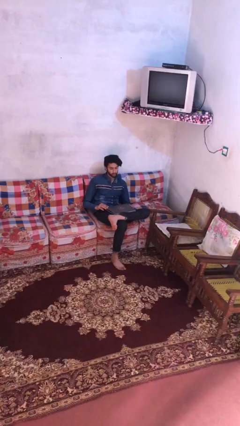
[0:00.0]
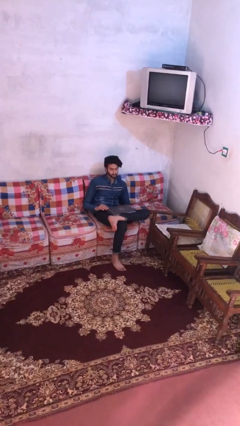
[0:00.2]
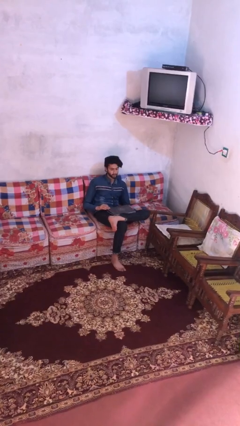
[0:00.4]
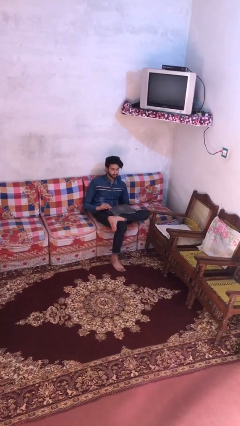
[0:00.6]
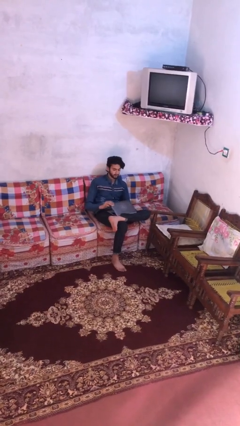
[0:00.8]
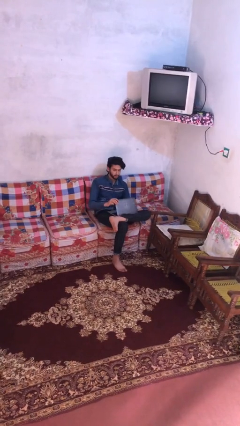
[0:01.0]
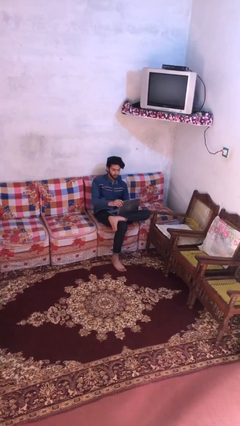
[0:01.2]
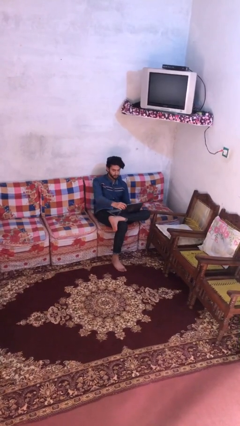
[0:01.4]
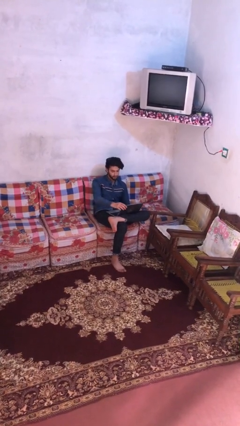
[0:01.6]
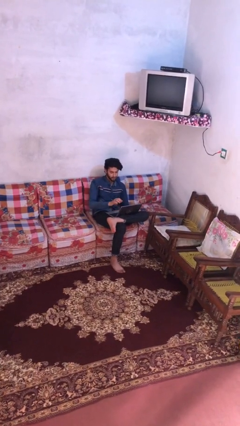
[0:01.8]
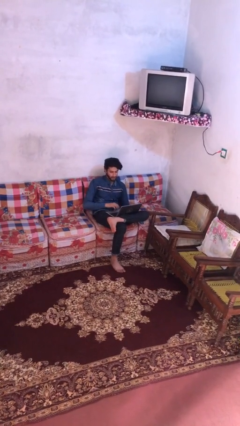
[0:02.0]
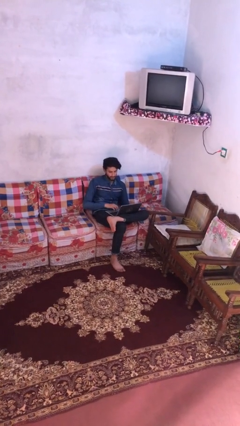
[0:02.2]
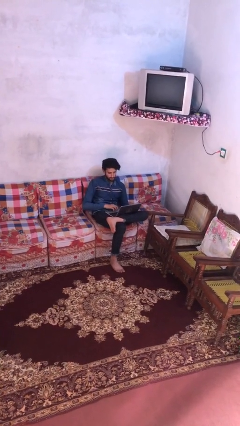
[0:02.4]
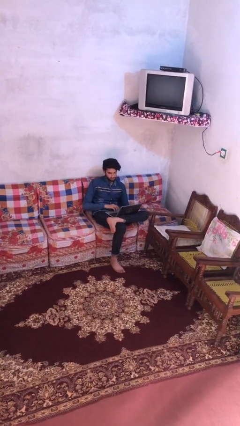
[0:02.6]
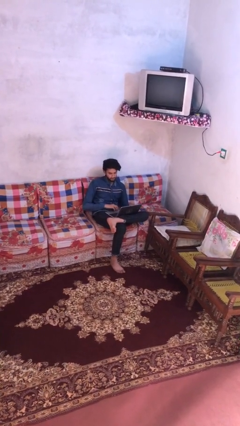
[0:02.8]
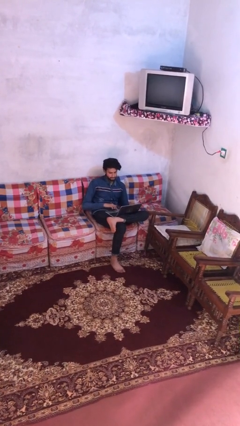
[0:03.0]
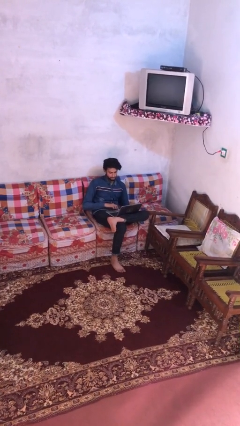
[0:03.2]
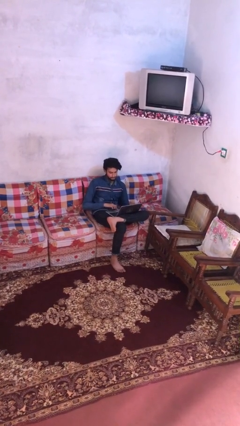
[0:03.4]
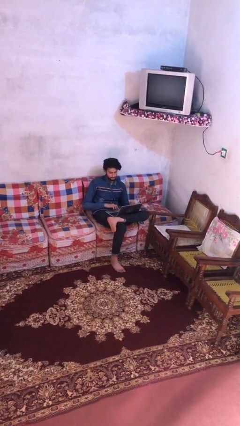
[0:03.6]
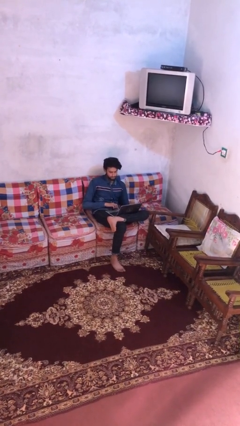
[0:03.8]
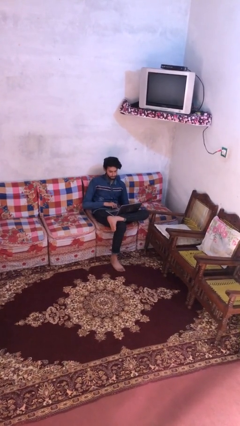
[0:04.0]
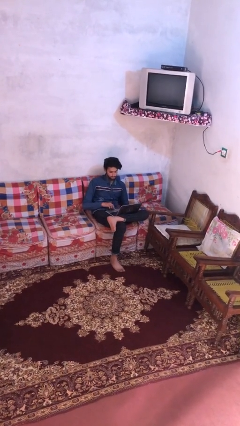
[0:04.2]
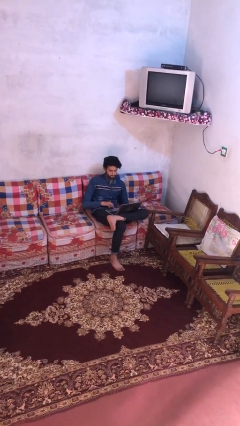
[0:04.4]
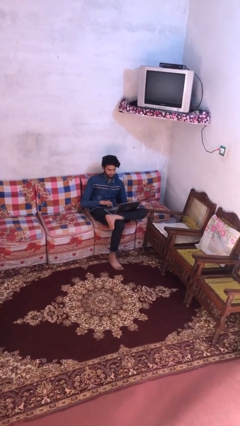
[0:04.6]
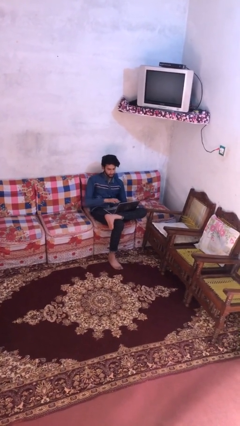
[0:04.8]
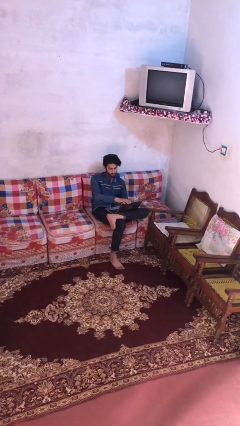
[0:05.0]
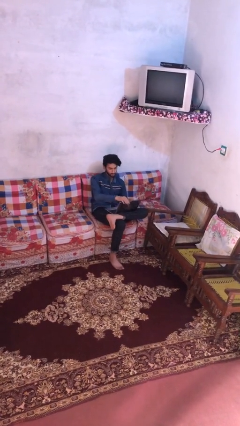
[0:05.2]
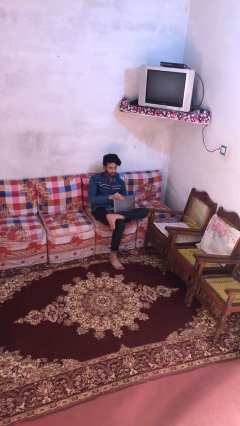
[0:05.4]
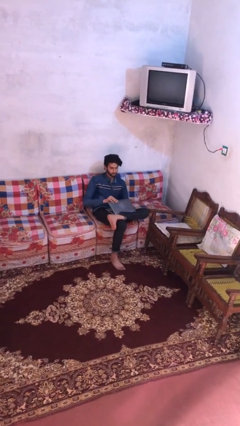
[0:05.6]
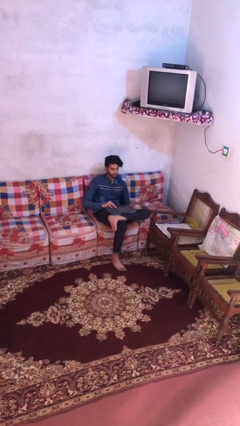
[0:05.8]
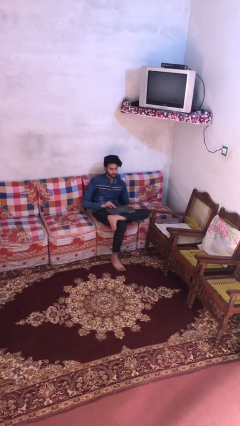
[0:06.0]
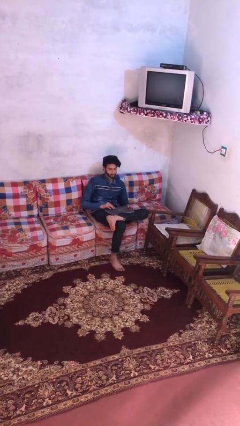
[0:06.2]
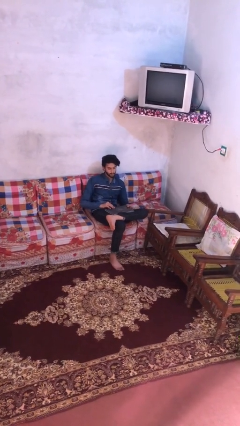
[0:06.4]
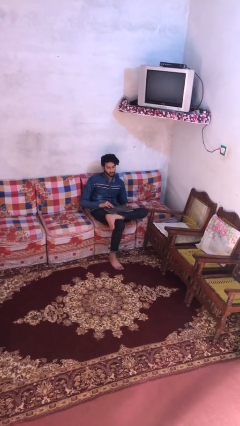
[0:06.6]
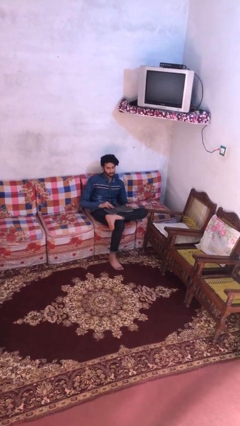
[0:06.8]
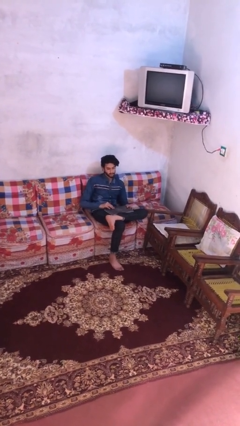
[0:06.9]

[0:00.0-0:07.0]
person interacts with laptop

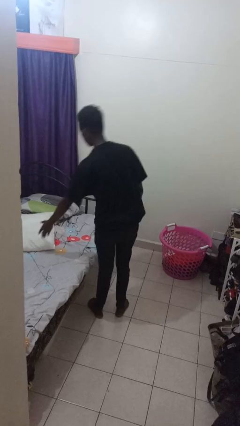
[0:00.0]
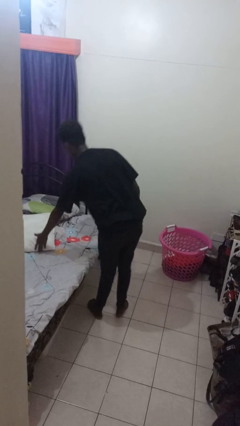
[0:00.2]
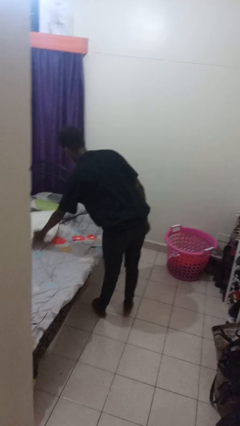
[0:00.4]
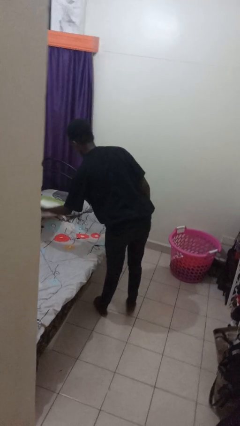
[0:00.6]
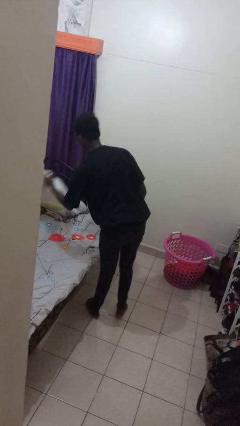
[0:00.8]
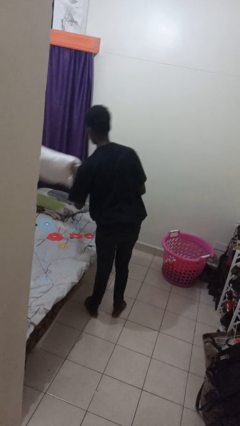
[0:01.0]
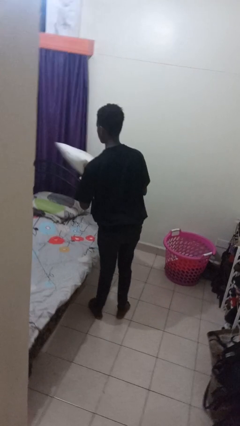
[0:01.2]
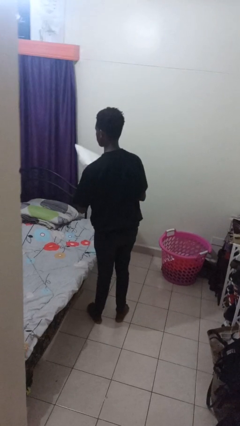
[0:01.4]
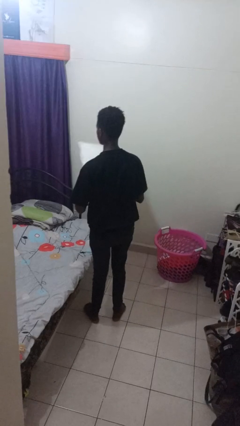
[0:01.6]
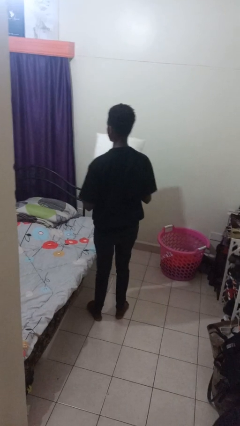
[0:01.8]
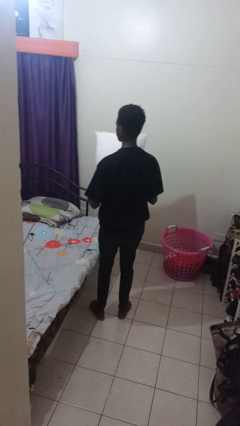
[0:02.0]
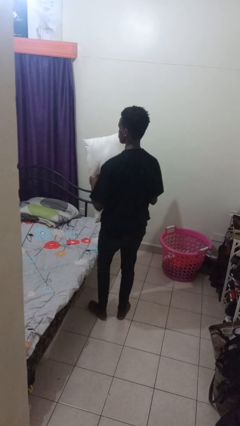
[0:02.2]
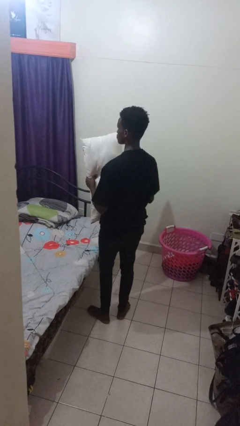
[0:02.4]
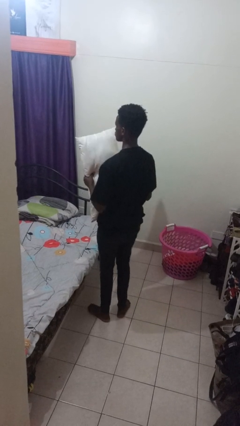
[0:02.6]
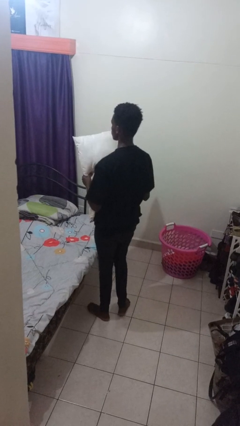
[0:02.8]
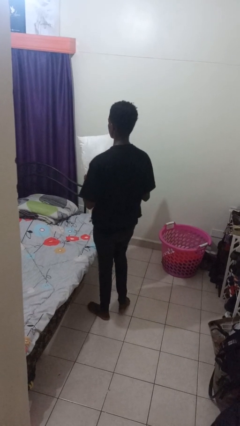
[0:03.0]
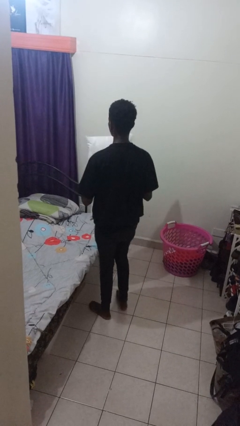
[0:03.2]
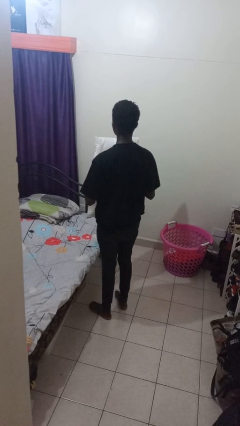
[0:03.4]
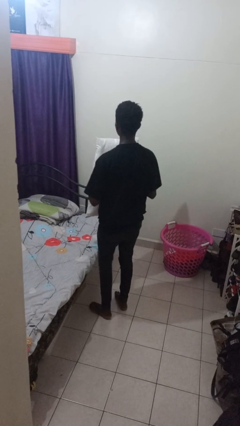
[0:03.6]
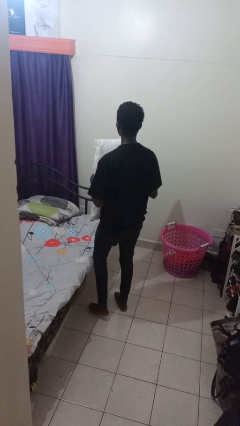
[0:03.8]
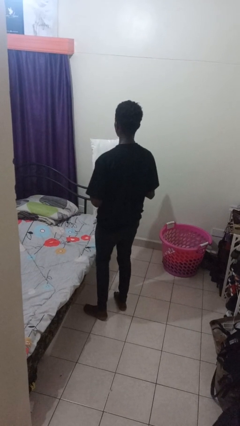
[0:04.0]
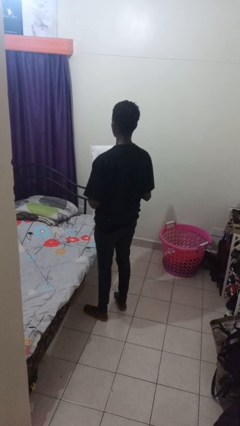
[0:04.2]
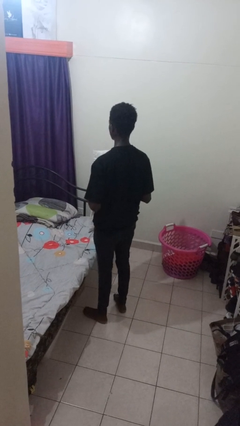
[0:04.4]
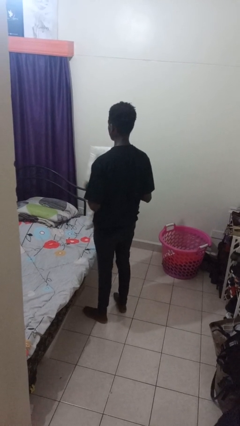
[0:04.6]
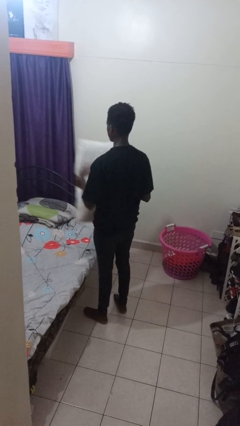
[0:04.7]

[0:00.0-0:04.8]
person picks up object from bed

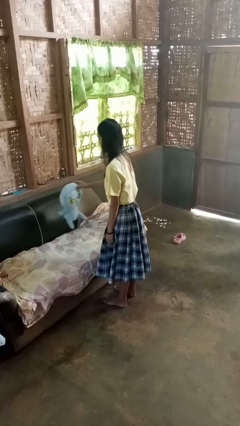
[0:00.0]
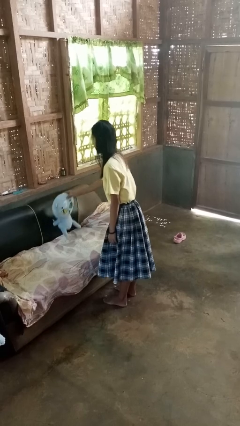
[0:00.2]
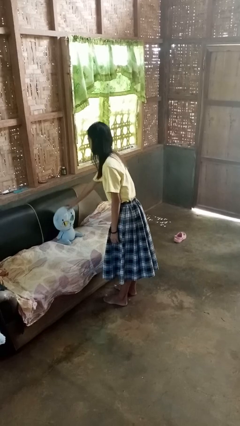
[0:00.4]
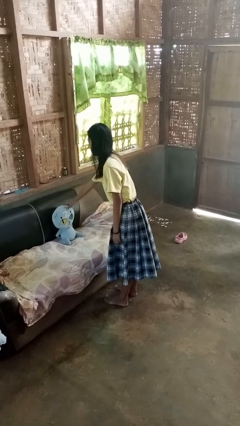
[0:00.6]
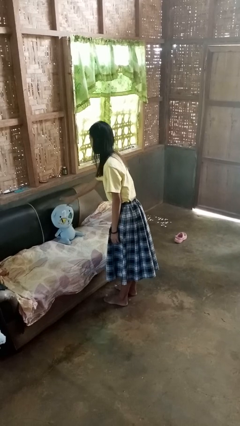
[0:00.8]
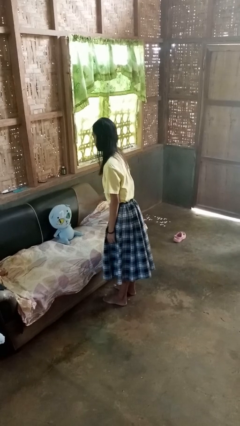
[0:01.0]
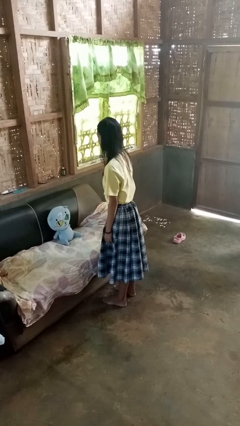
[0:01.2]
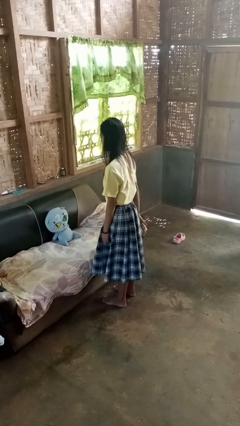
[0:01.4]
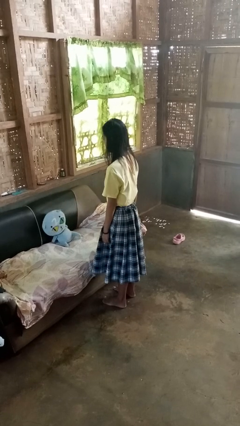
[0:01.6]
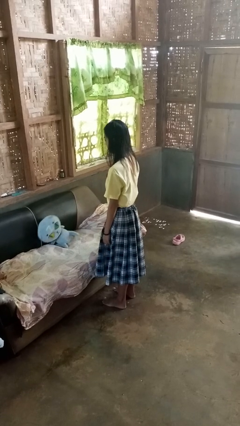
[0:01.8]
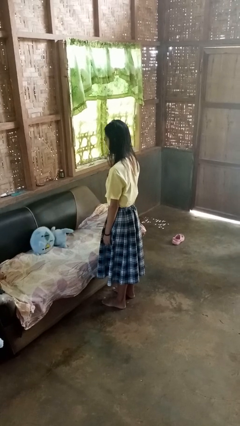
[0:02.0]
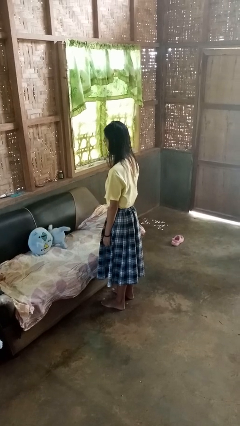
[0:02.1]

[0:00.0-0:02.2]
person puts down object on couch

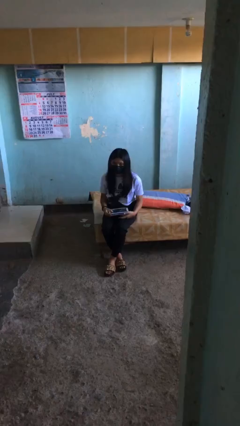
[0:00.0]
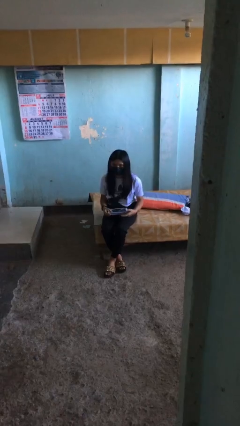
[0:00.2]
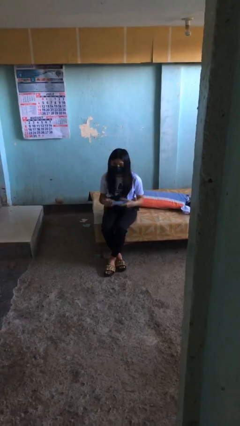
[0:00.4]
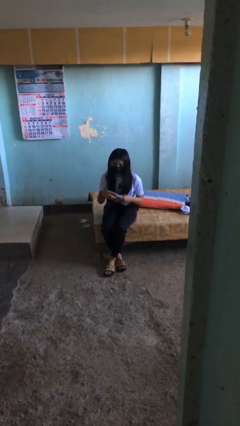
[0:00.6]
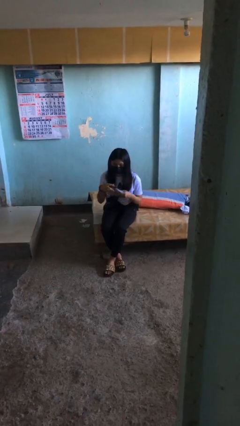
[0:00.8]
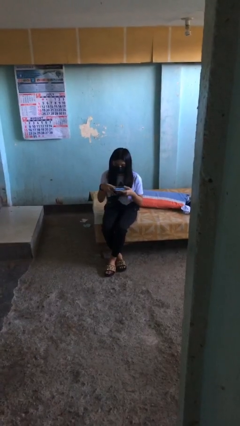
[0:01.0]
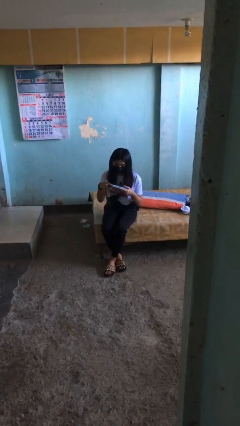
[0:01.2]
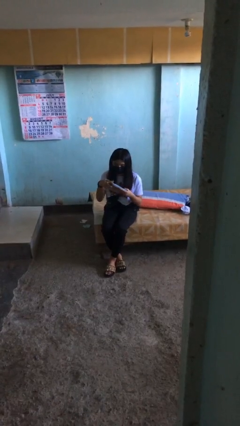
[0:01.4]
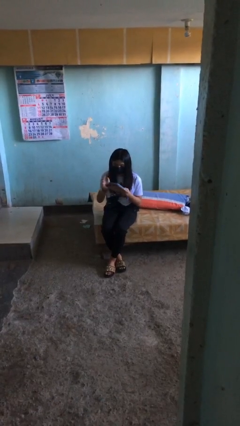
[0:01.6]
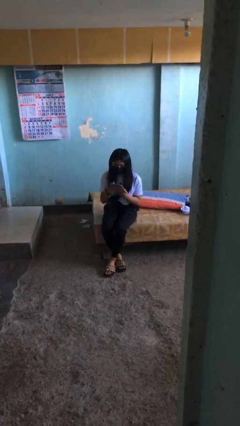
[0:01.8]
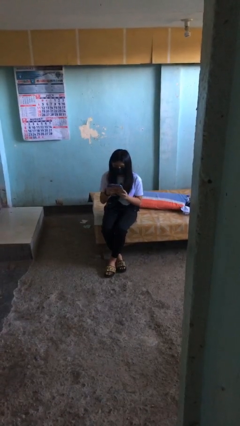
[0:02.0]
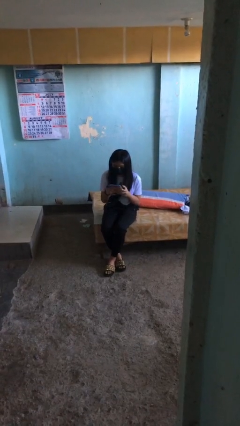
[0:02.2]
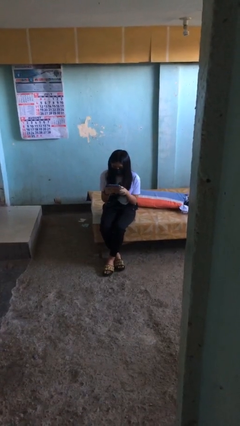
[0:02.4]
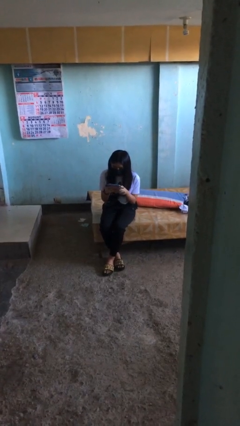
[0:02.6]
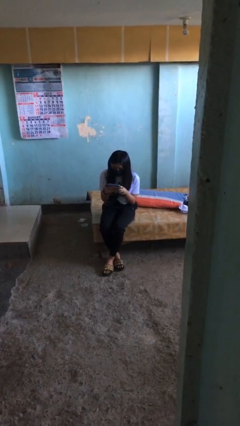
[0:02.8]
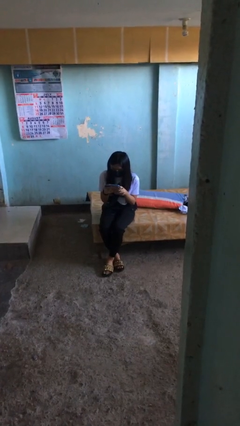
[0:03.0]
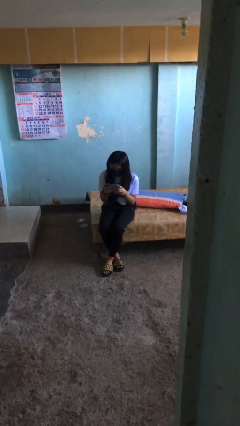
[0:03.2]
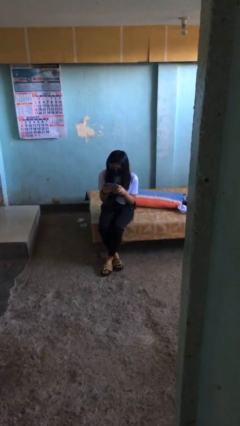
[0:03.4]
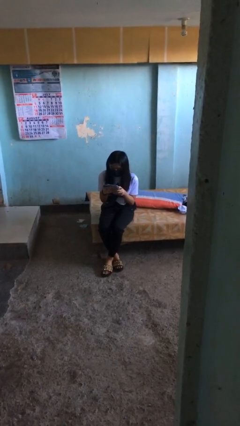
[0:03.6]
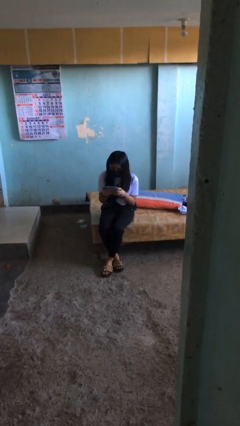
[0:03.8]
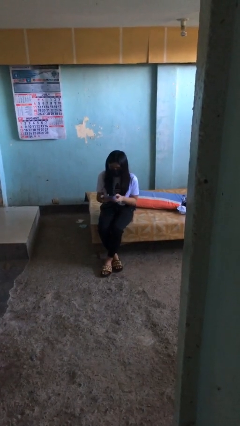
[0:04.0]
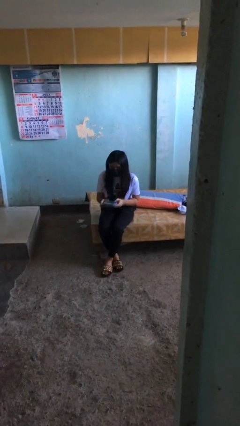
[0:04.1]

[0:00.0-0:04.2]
person interacts with tablet
